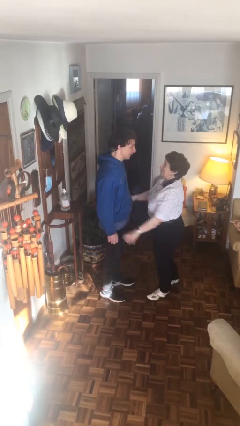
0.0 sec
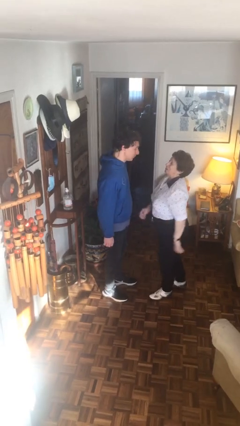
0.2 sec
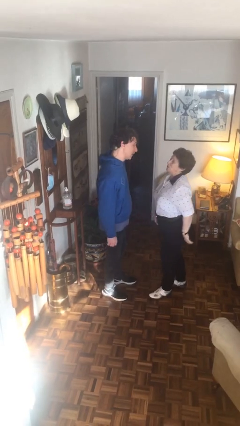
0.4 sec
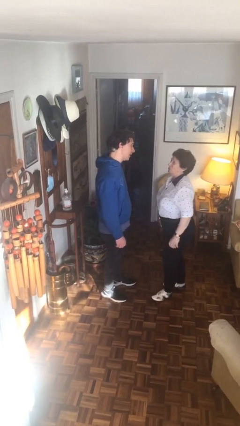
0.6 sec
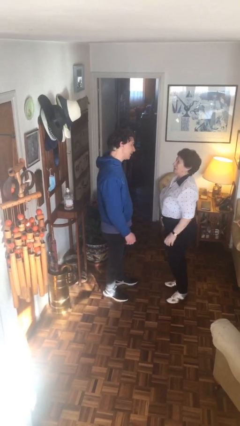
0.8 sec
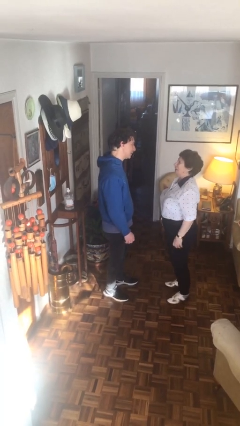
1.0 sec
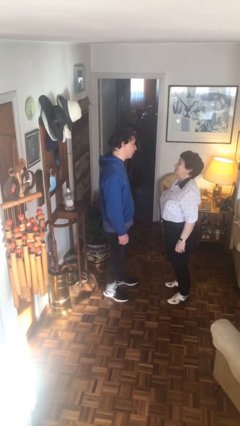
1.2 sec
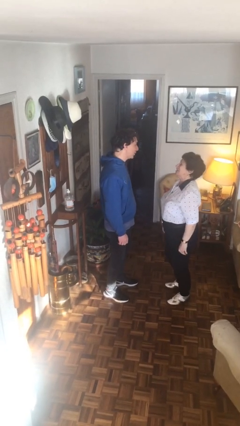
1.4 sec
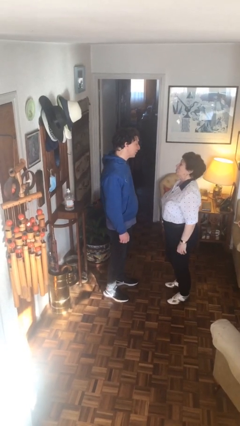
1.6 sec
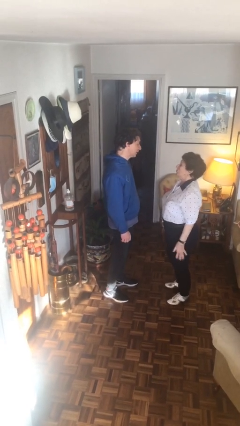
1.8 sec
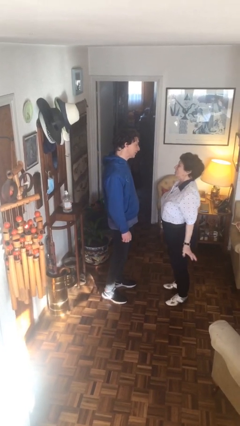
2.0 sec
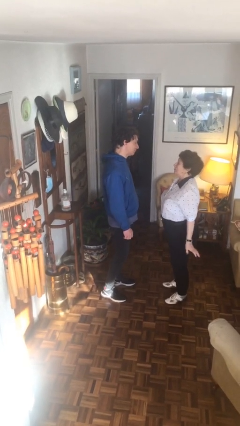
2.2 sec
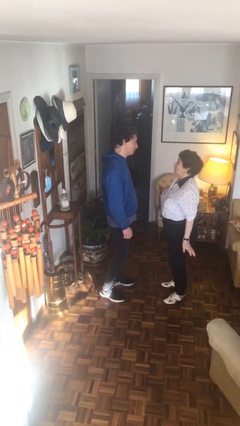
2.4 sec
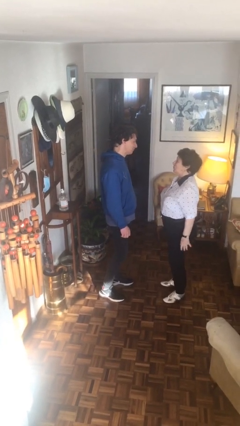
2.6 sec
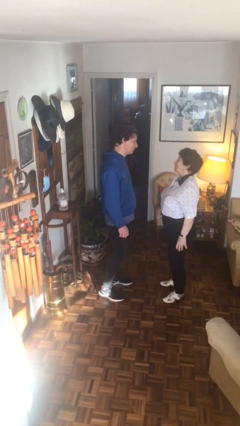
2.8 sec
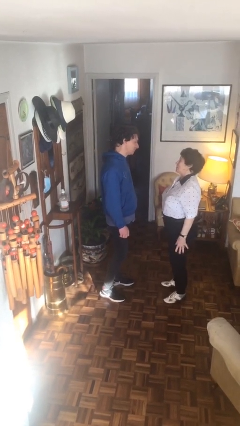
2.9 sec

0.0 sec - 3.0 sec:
person talks to person

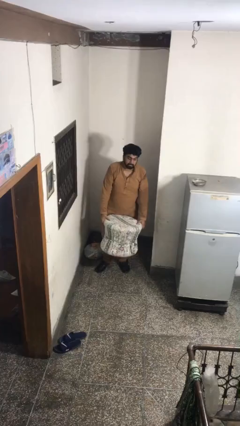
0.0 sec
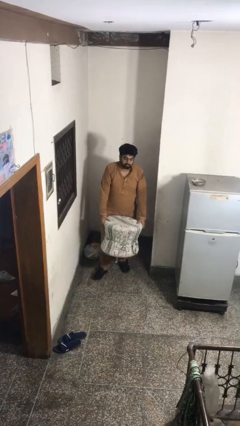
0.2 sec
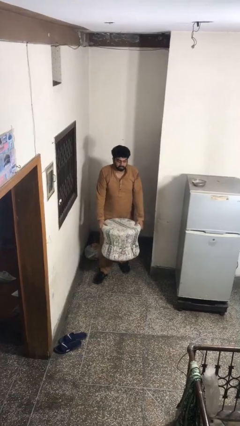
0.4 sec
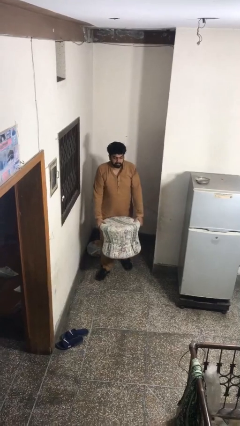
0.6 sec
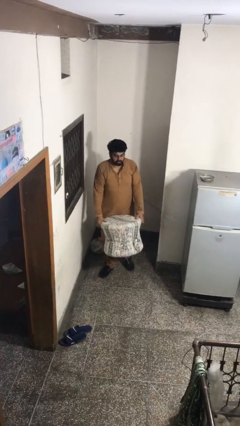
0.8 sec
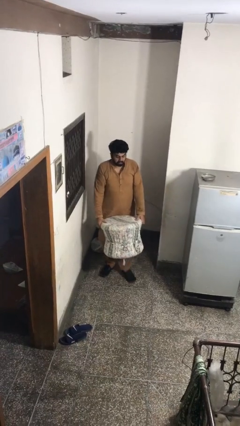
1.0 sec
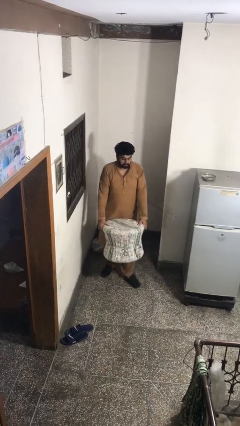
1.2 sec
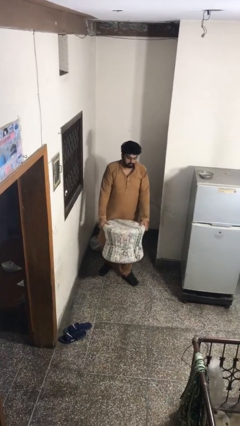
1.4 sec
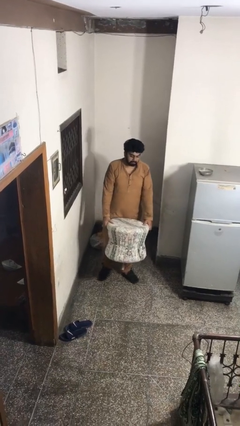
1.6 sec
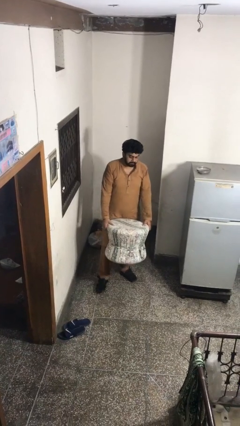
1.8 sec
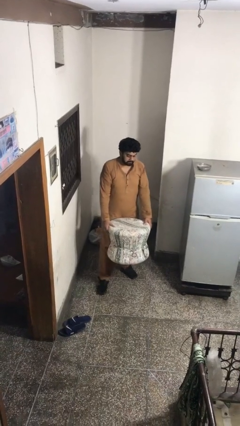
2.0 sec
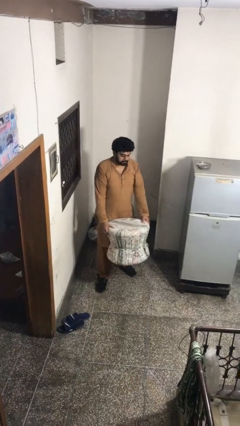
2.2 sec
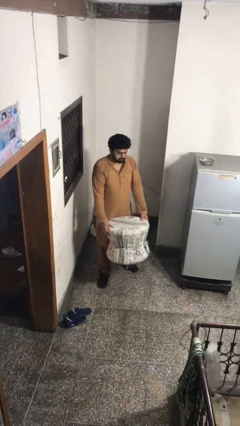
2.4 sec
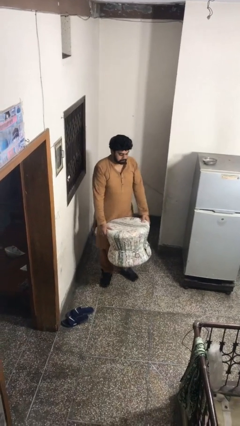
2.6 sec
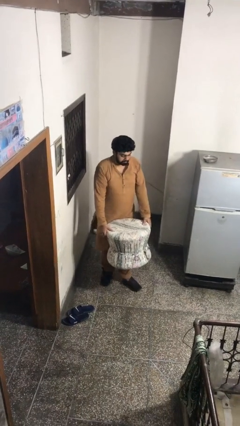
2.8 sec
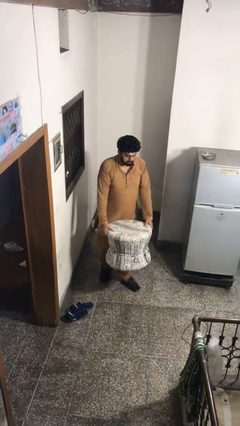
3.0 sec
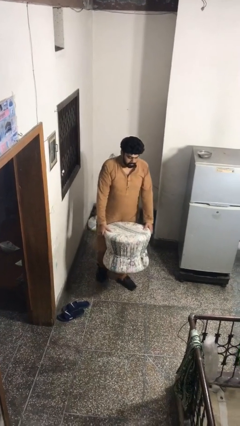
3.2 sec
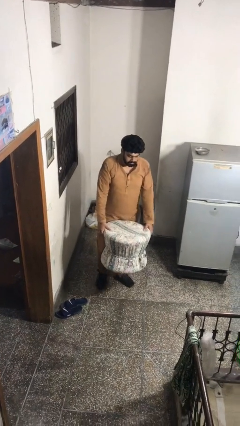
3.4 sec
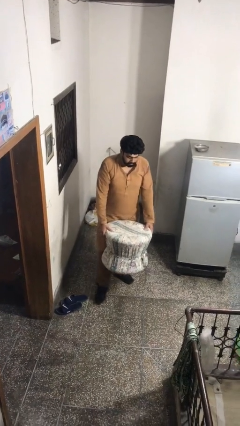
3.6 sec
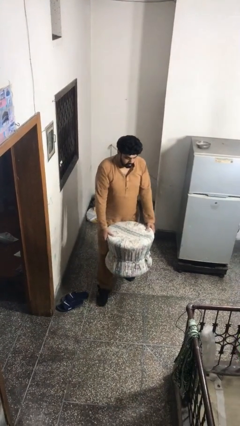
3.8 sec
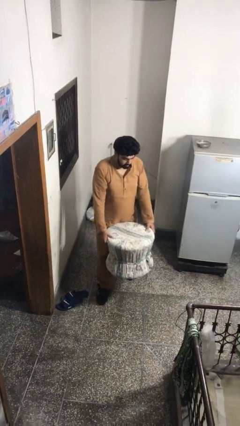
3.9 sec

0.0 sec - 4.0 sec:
person carries heavy object

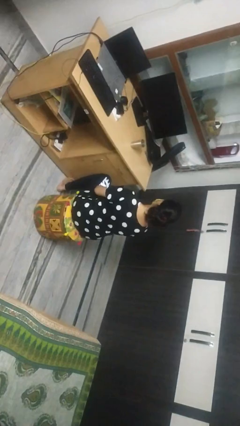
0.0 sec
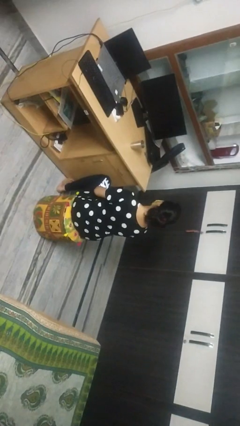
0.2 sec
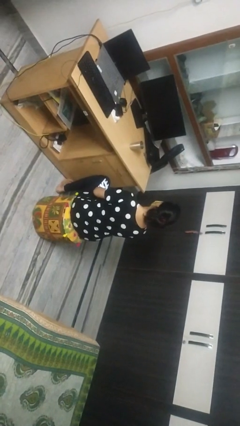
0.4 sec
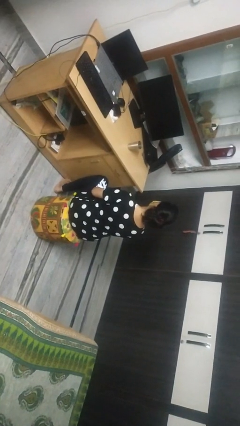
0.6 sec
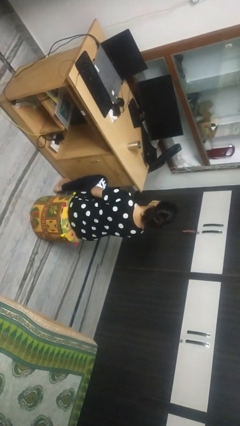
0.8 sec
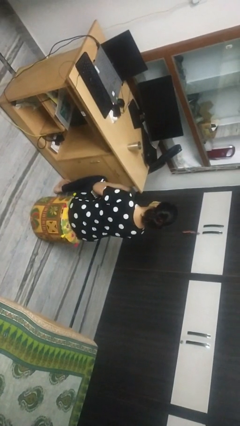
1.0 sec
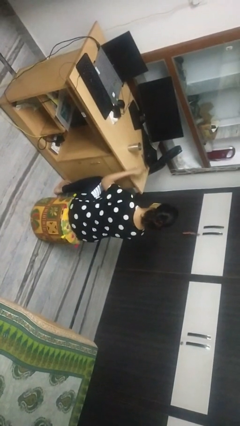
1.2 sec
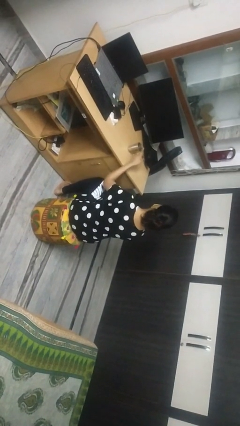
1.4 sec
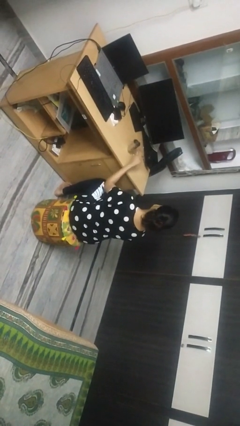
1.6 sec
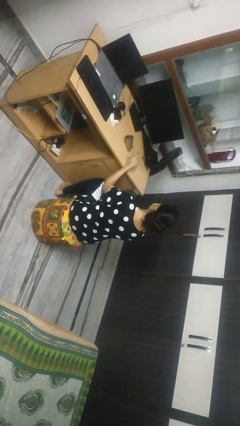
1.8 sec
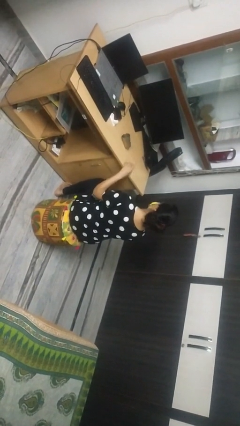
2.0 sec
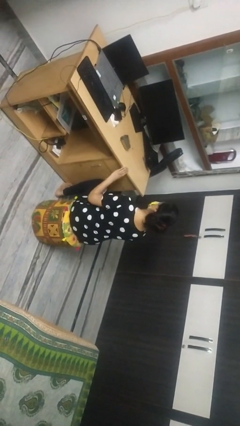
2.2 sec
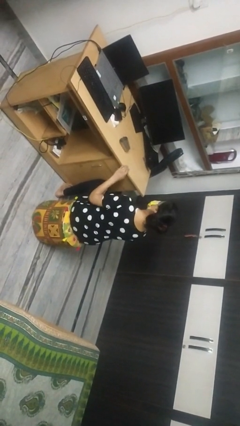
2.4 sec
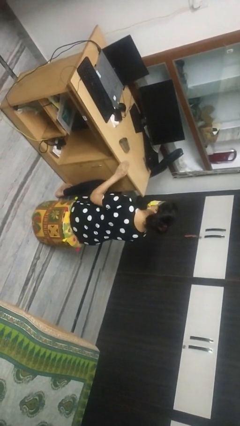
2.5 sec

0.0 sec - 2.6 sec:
person knocks over glass

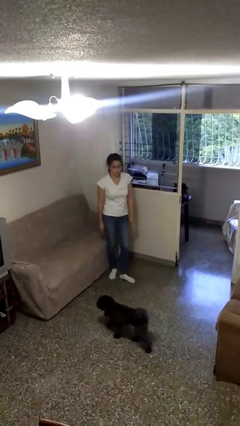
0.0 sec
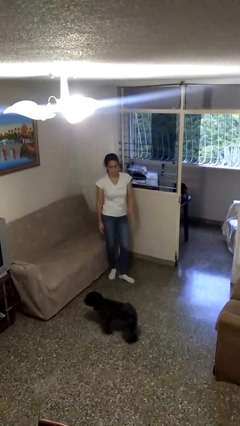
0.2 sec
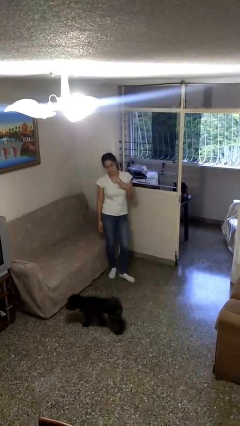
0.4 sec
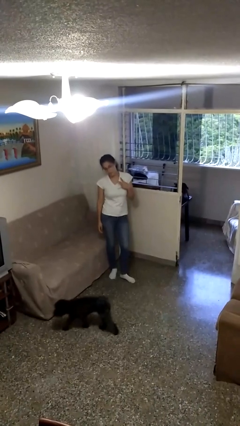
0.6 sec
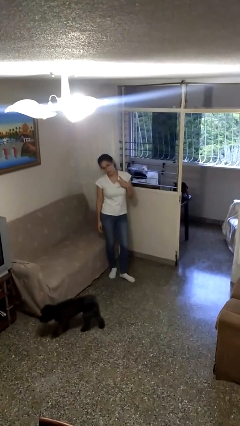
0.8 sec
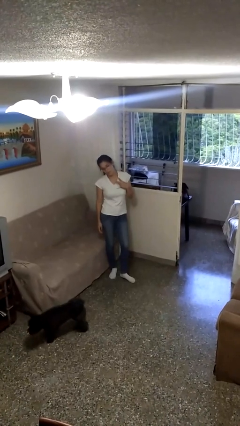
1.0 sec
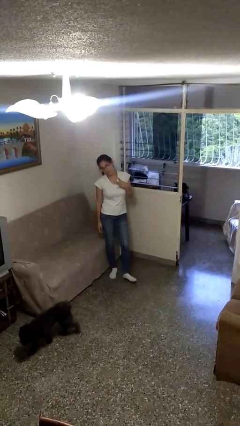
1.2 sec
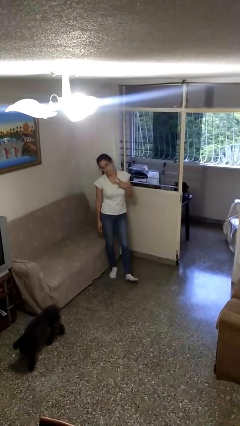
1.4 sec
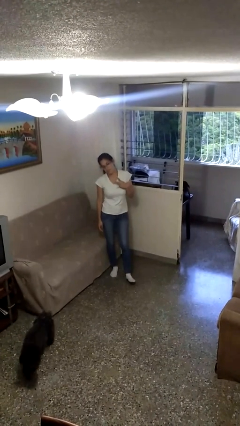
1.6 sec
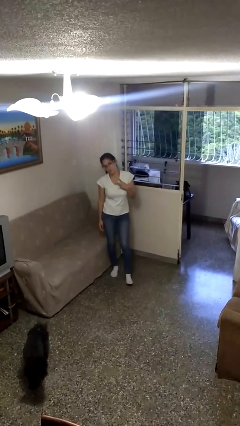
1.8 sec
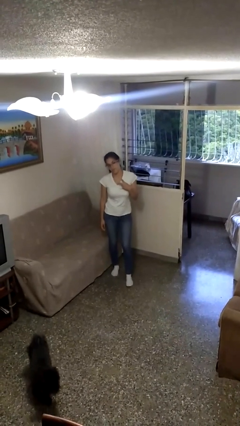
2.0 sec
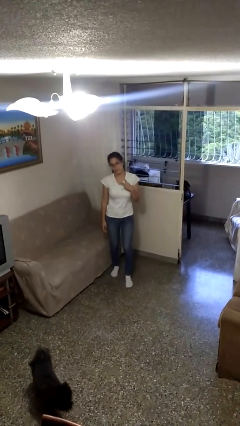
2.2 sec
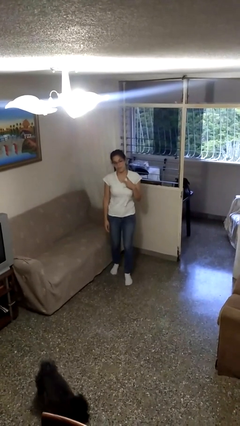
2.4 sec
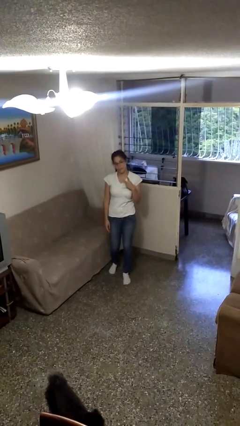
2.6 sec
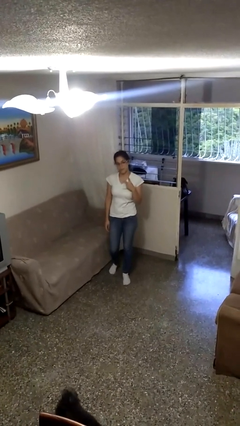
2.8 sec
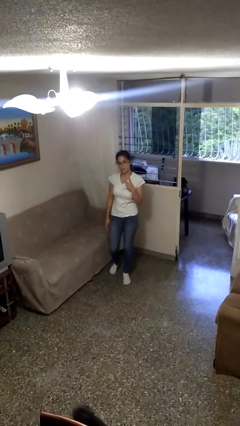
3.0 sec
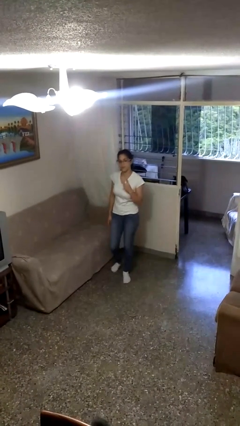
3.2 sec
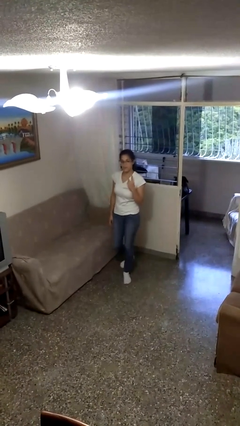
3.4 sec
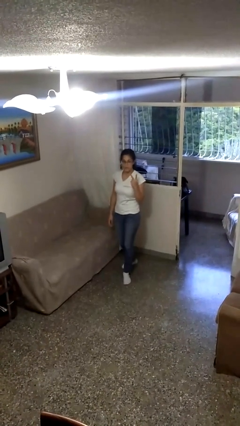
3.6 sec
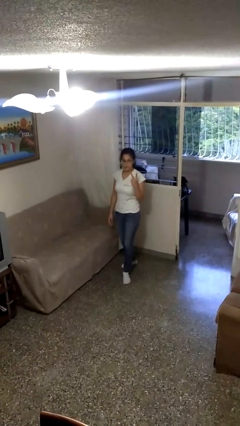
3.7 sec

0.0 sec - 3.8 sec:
person gestures peace

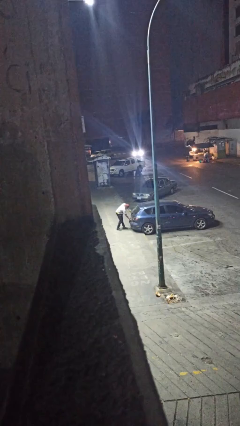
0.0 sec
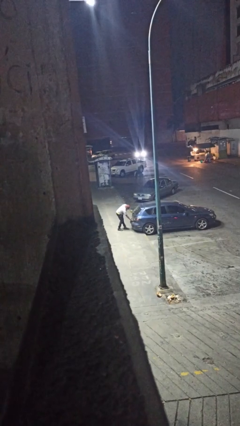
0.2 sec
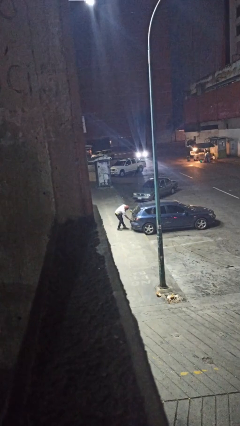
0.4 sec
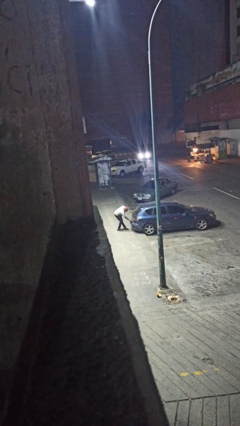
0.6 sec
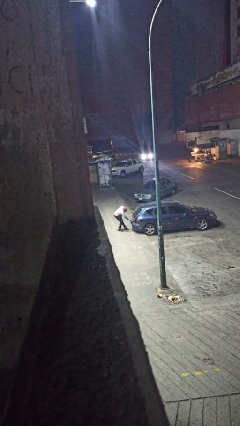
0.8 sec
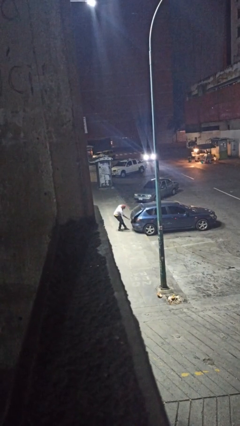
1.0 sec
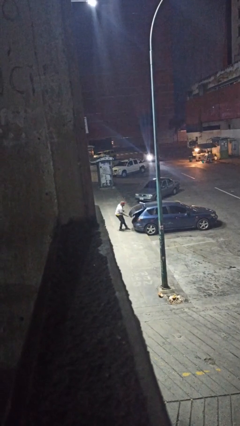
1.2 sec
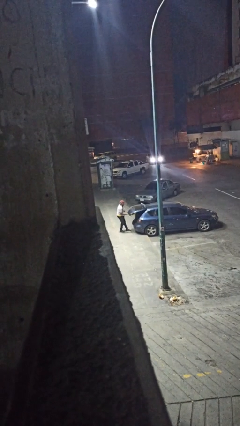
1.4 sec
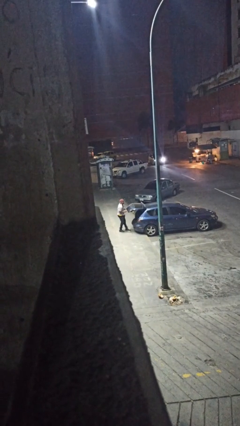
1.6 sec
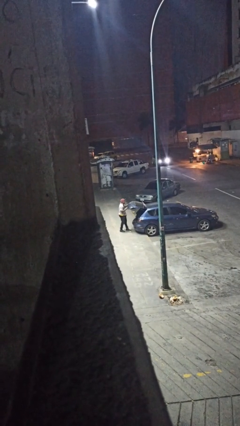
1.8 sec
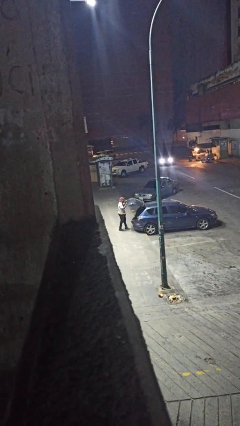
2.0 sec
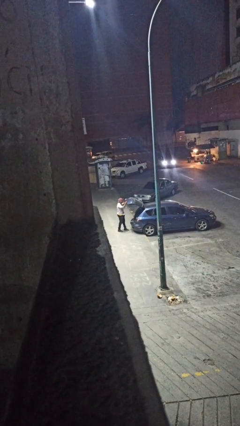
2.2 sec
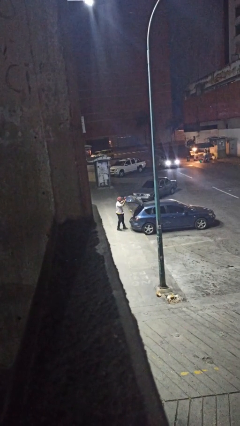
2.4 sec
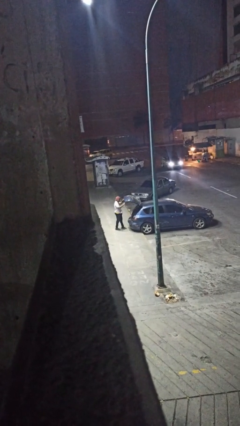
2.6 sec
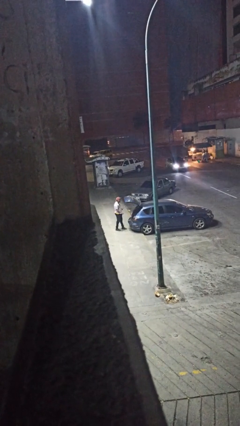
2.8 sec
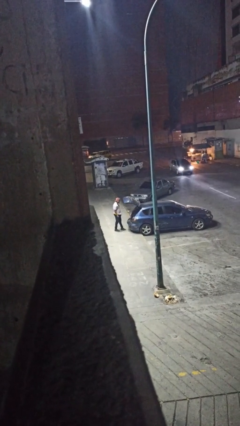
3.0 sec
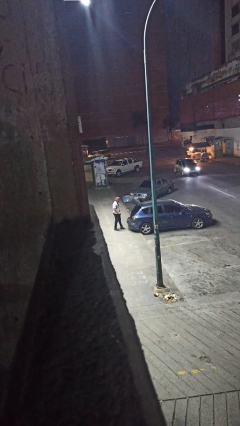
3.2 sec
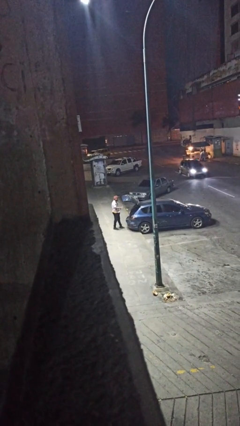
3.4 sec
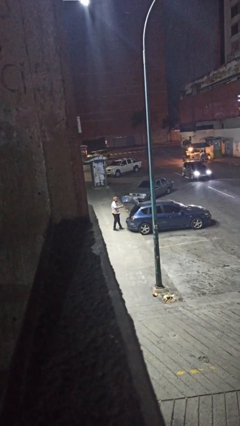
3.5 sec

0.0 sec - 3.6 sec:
person opens car trunk

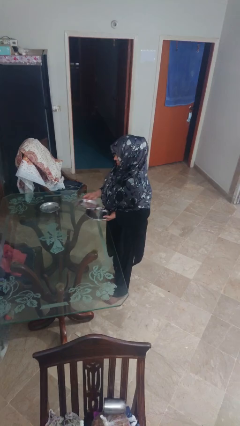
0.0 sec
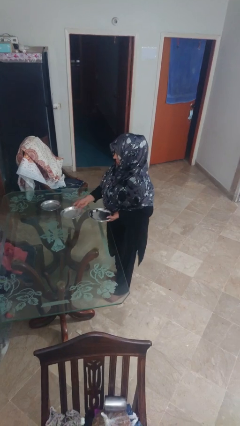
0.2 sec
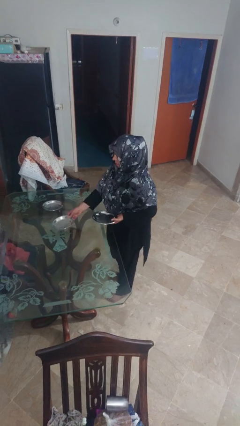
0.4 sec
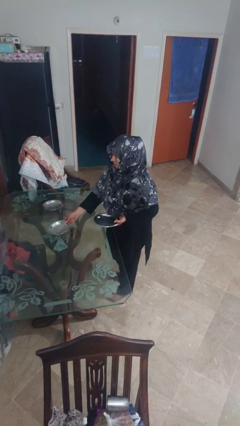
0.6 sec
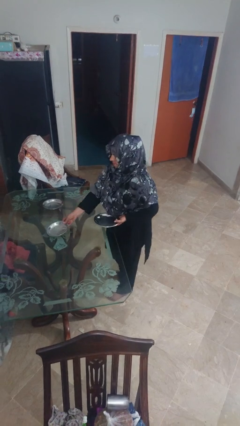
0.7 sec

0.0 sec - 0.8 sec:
person sets table
